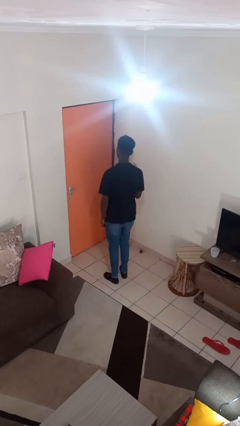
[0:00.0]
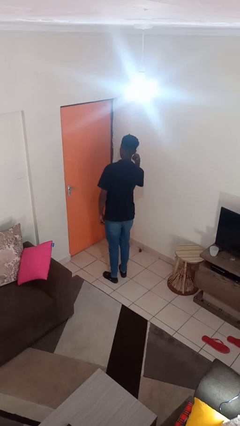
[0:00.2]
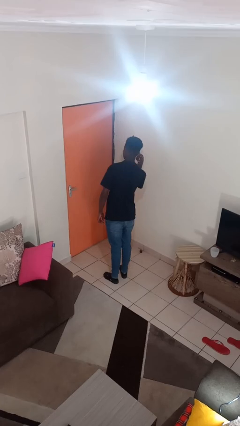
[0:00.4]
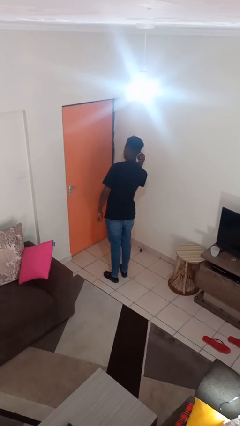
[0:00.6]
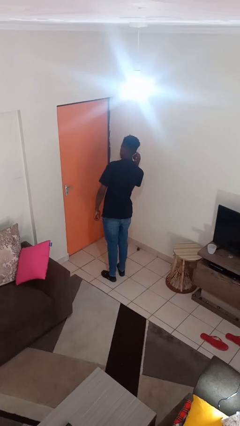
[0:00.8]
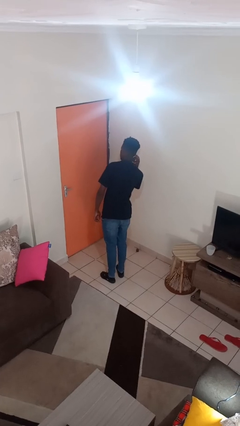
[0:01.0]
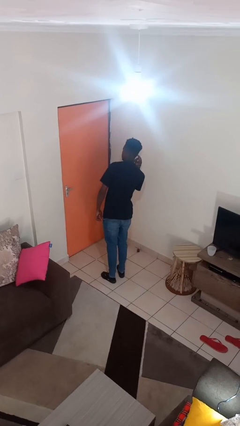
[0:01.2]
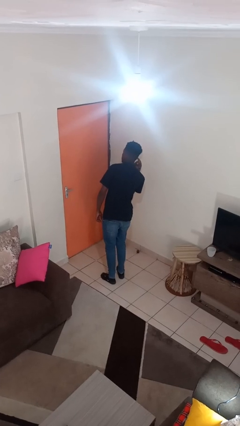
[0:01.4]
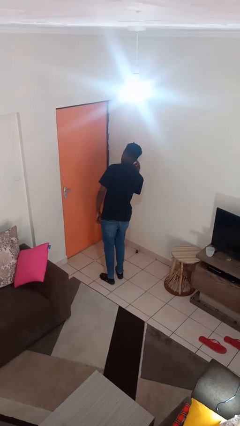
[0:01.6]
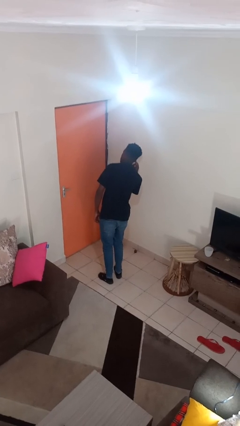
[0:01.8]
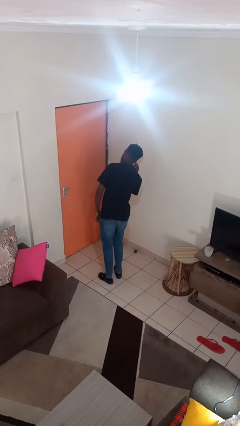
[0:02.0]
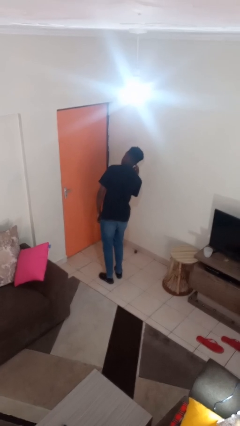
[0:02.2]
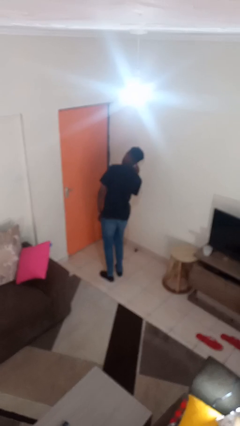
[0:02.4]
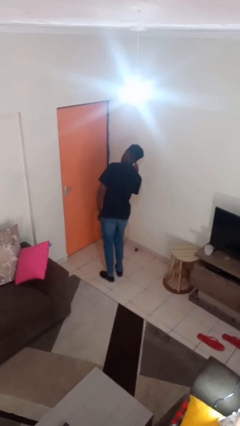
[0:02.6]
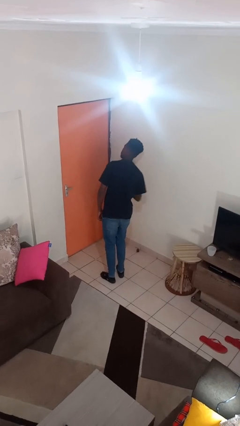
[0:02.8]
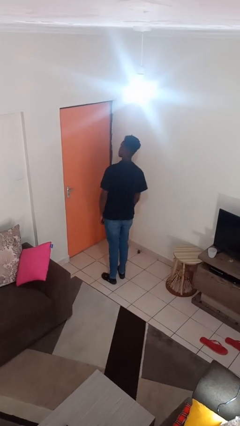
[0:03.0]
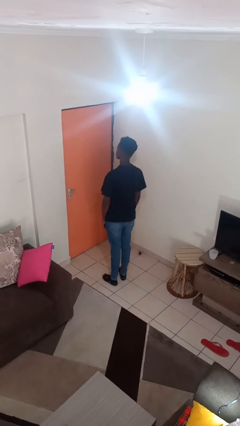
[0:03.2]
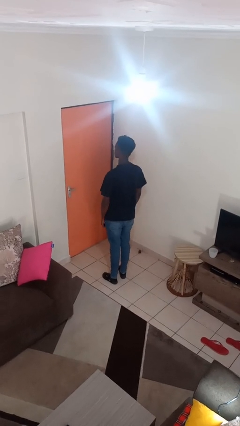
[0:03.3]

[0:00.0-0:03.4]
person gestures listen closely

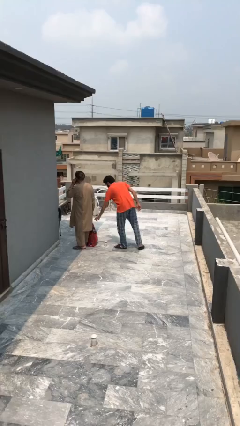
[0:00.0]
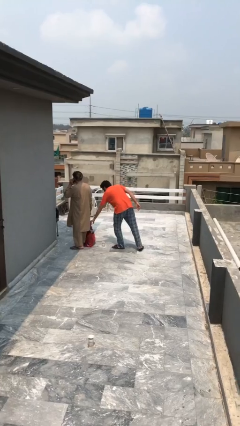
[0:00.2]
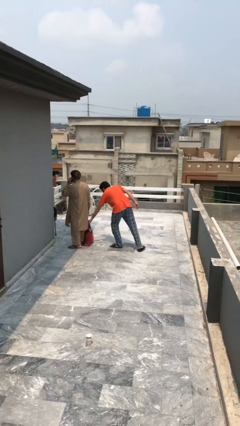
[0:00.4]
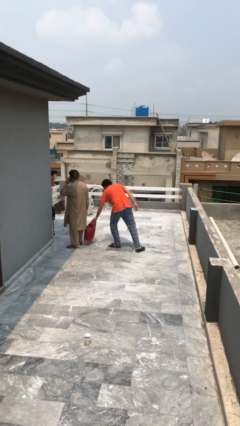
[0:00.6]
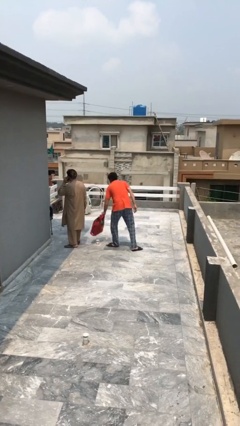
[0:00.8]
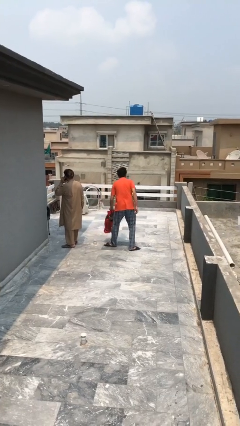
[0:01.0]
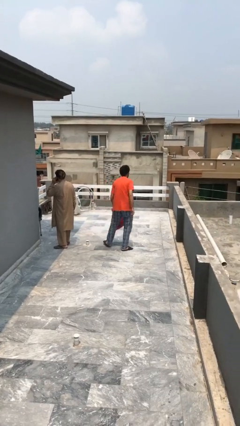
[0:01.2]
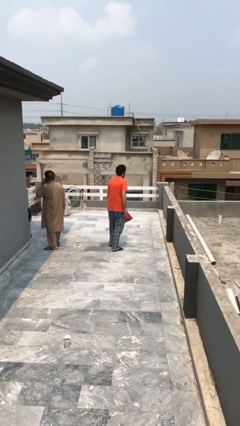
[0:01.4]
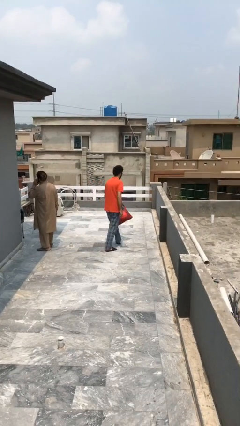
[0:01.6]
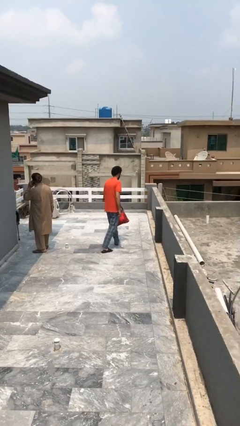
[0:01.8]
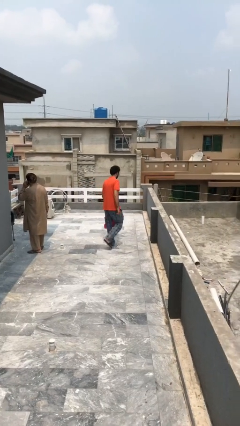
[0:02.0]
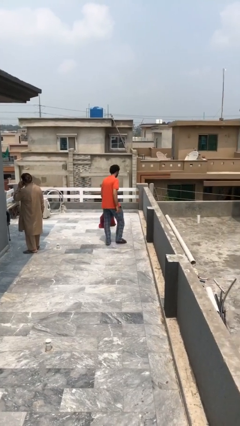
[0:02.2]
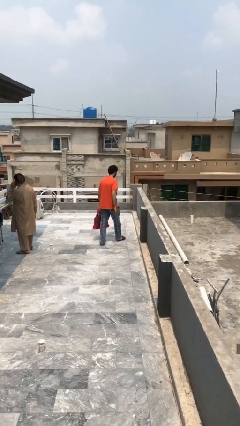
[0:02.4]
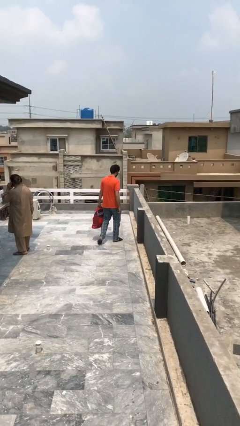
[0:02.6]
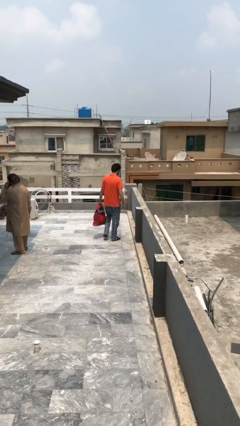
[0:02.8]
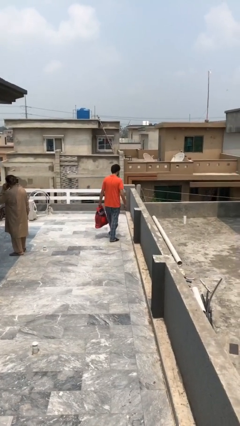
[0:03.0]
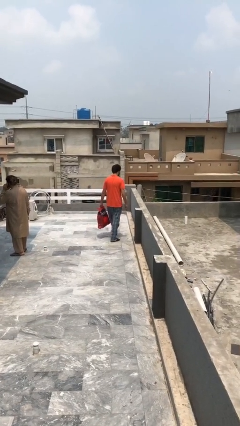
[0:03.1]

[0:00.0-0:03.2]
person steals object from person

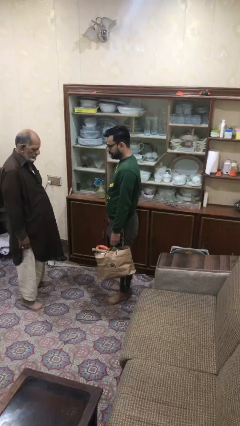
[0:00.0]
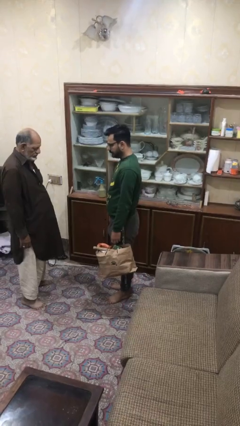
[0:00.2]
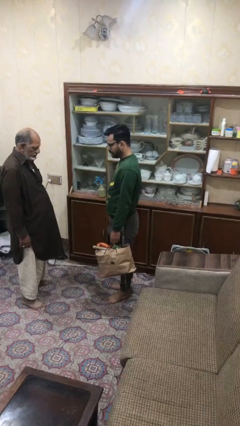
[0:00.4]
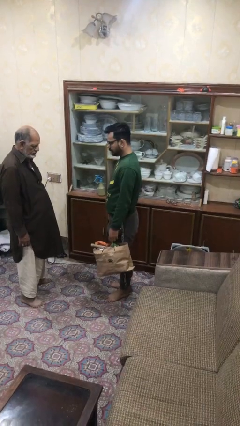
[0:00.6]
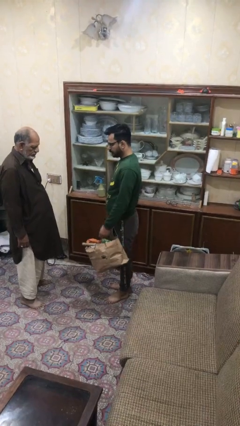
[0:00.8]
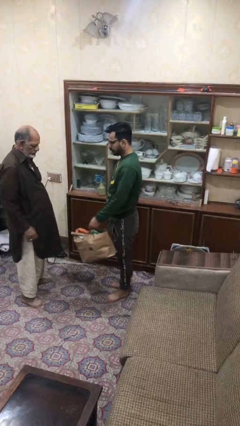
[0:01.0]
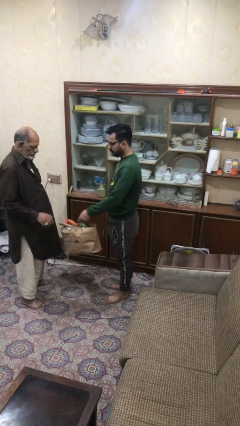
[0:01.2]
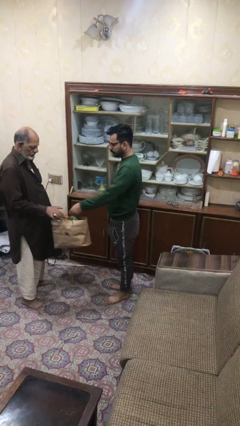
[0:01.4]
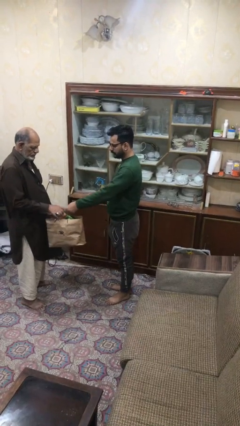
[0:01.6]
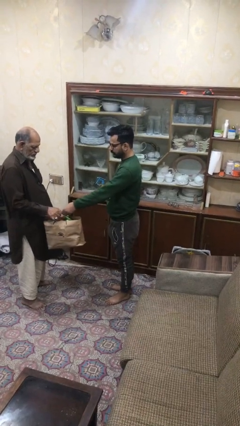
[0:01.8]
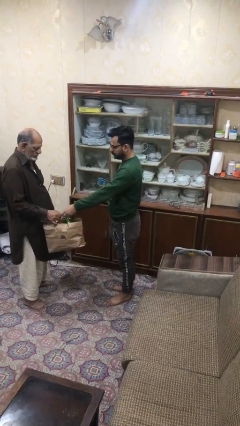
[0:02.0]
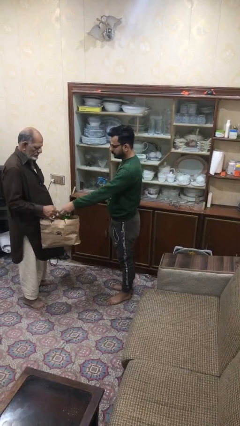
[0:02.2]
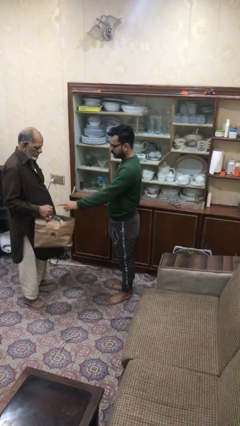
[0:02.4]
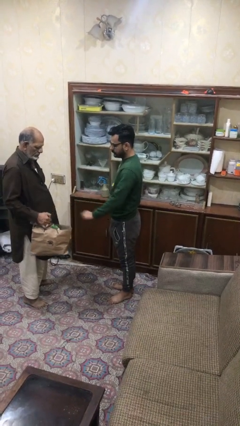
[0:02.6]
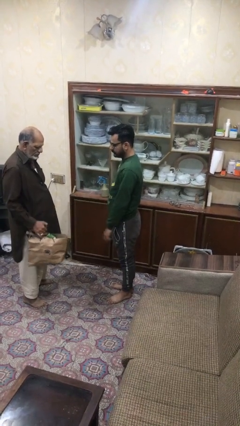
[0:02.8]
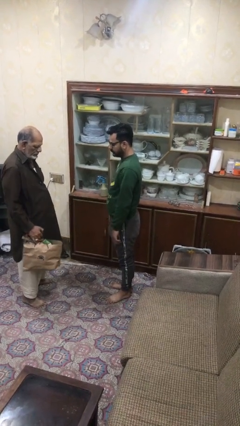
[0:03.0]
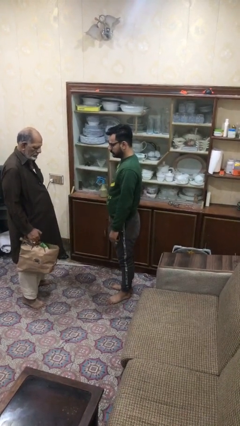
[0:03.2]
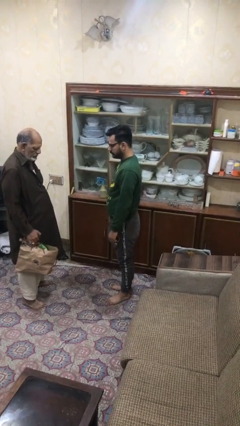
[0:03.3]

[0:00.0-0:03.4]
person transfers object to person

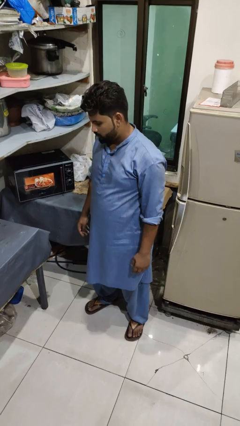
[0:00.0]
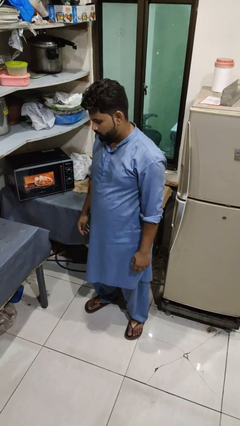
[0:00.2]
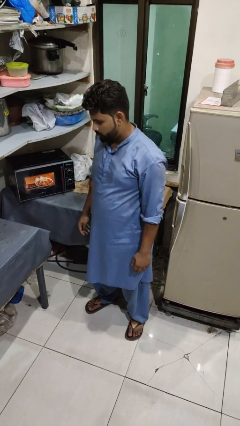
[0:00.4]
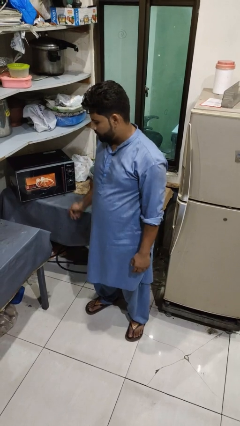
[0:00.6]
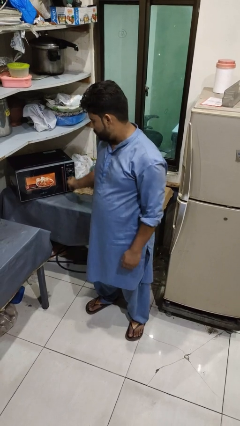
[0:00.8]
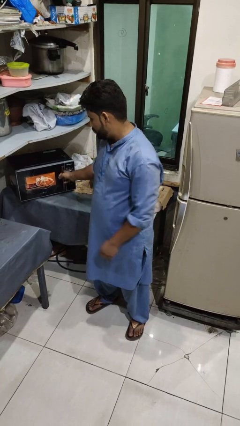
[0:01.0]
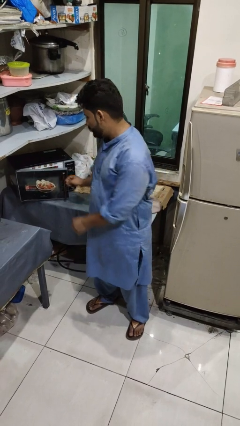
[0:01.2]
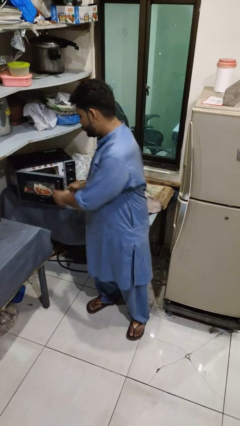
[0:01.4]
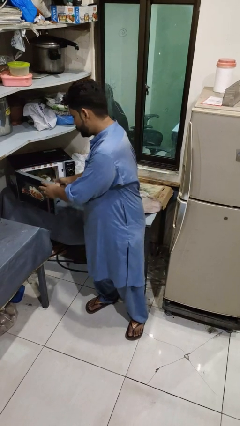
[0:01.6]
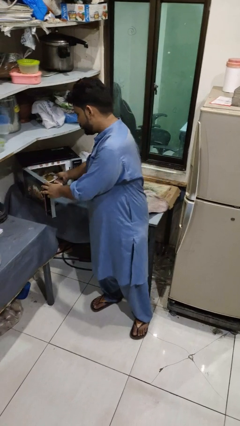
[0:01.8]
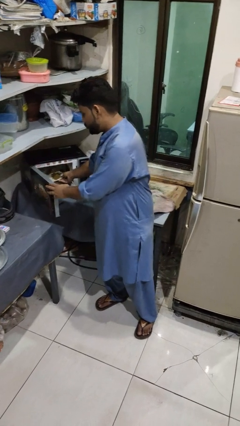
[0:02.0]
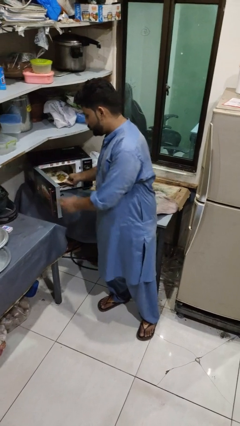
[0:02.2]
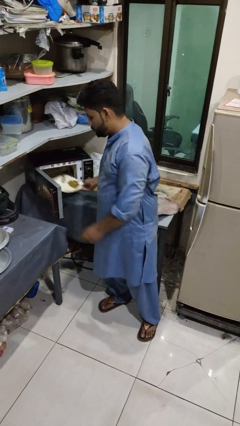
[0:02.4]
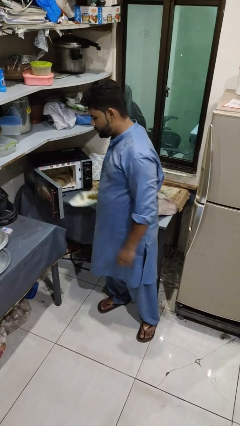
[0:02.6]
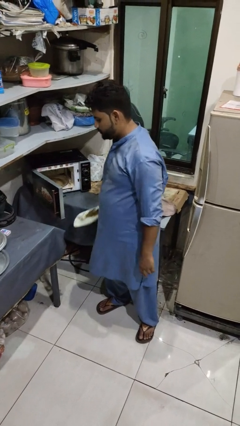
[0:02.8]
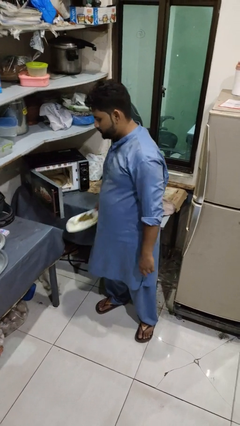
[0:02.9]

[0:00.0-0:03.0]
person takes object from microwave

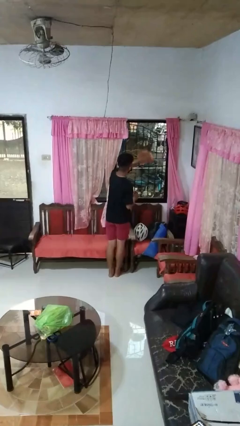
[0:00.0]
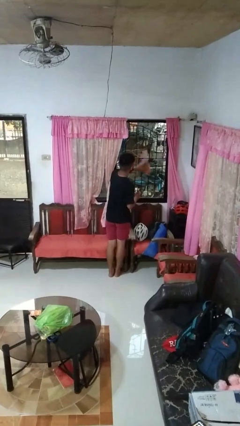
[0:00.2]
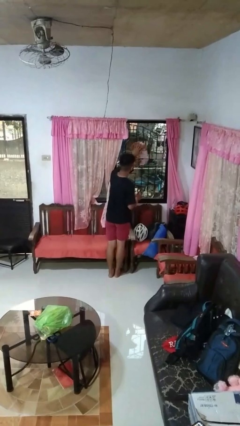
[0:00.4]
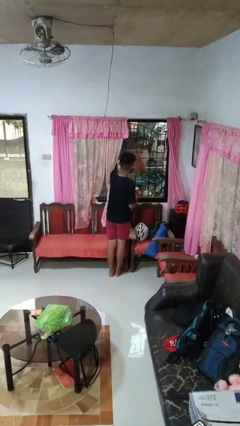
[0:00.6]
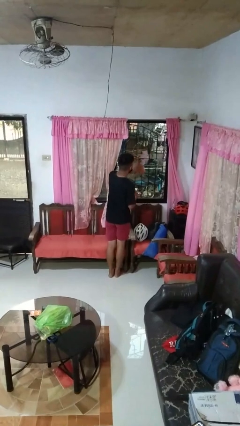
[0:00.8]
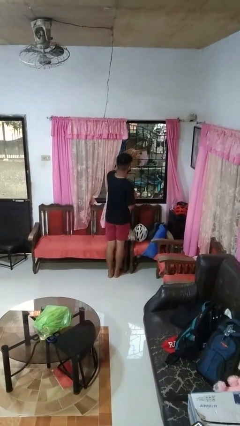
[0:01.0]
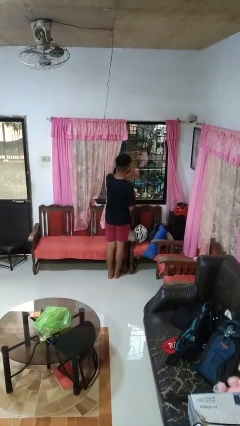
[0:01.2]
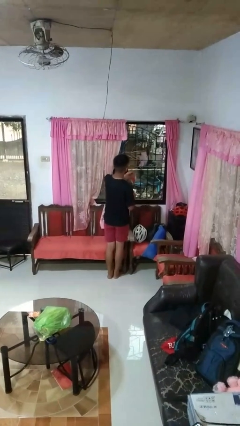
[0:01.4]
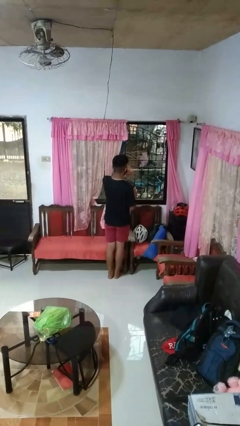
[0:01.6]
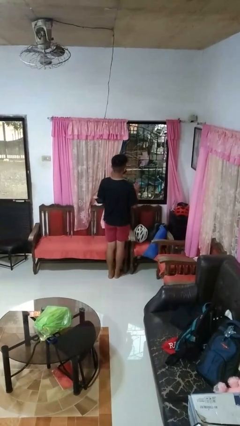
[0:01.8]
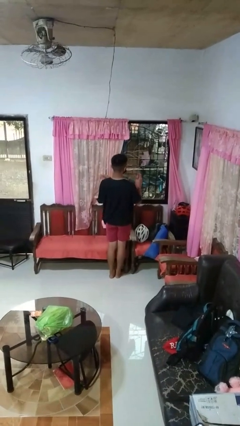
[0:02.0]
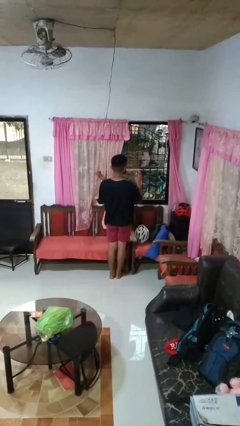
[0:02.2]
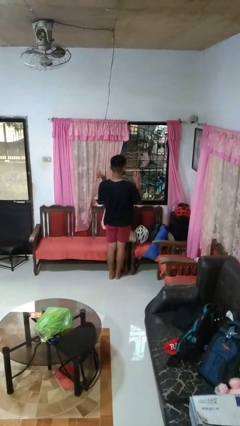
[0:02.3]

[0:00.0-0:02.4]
person washes window

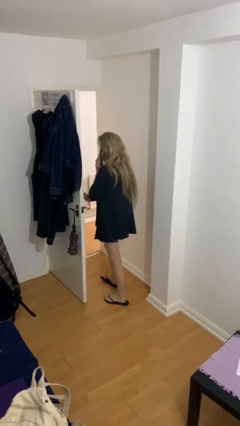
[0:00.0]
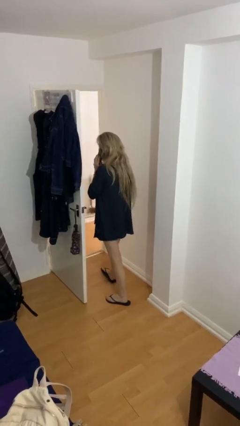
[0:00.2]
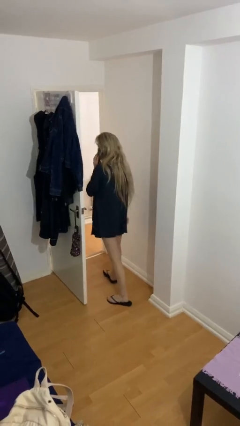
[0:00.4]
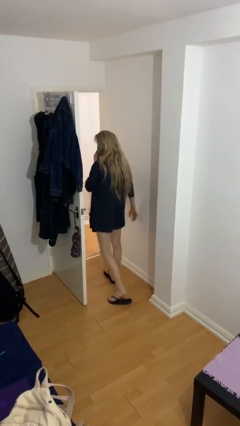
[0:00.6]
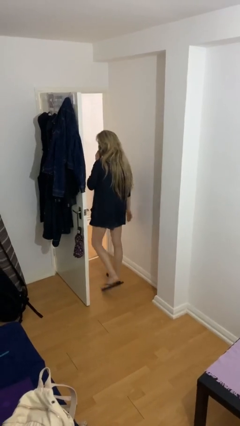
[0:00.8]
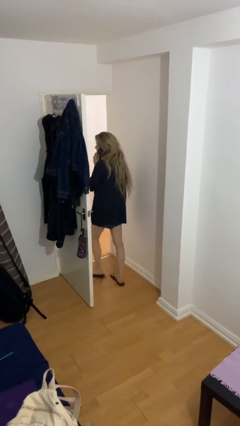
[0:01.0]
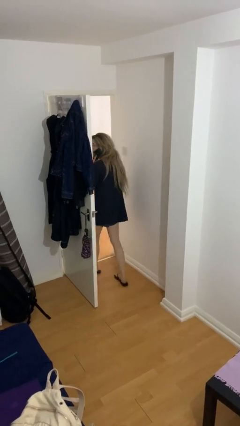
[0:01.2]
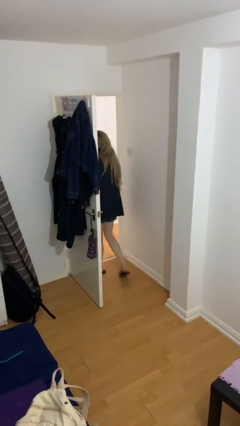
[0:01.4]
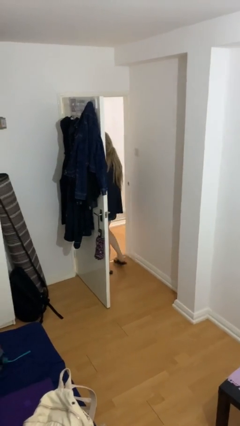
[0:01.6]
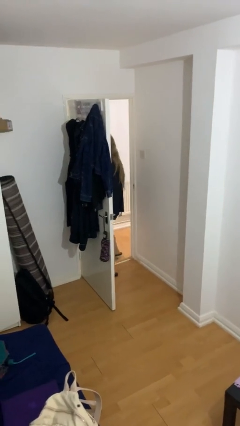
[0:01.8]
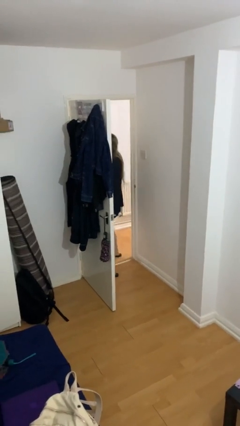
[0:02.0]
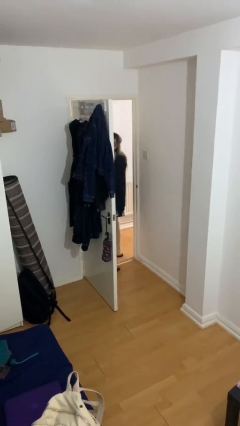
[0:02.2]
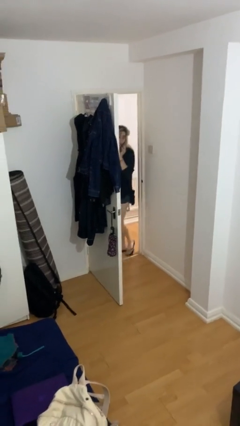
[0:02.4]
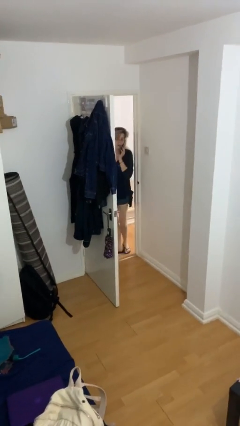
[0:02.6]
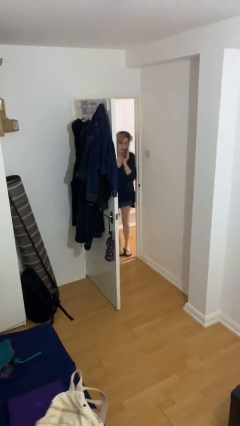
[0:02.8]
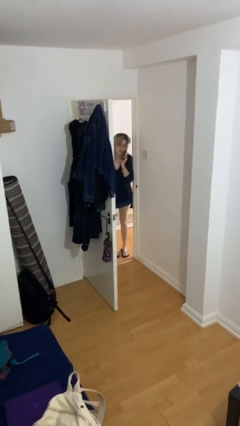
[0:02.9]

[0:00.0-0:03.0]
person exits scene through structure
